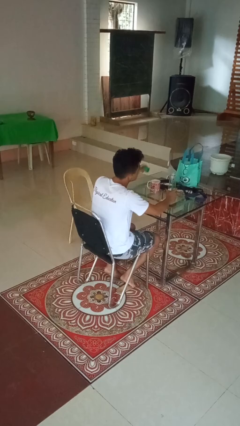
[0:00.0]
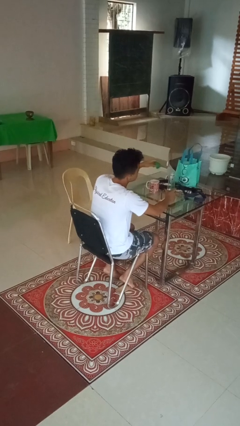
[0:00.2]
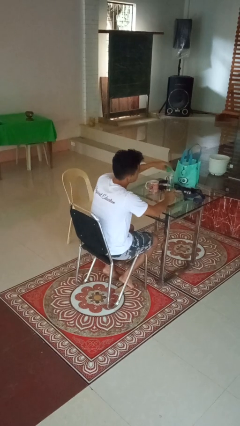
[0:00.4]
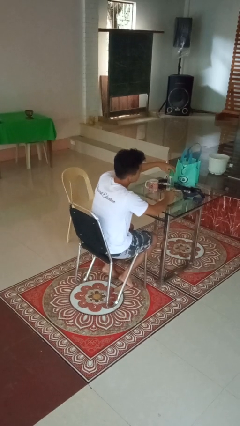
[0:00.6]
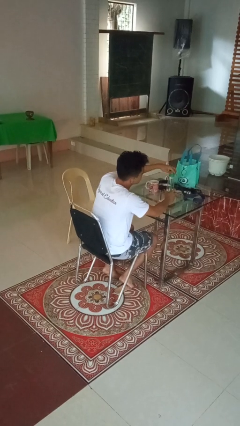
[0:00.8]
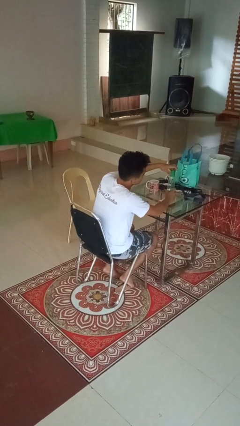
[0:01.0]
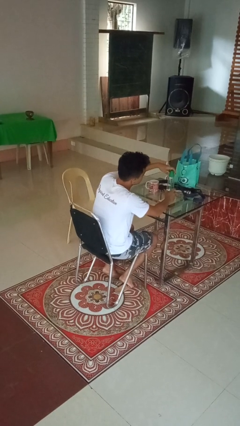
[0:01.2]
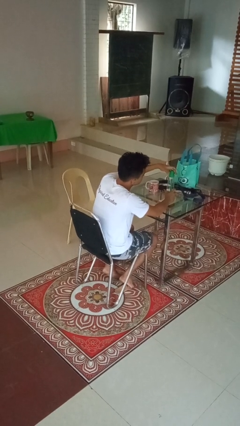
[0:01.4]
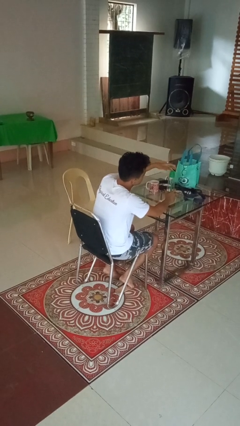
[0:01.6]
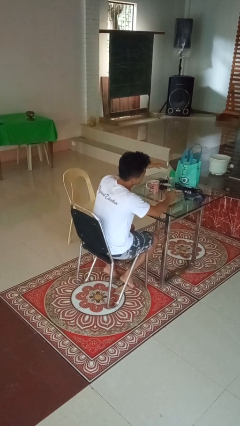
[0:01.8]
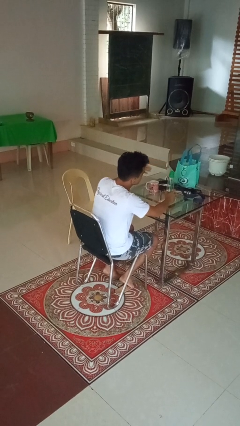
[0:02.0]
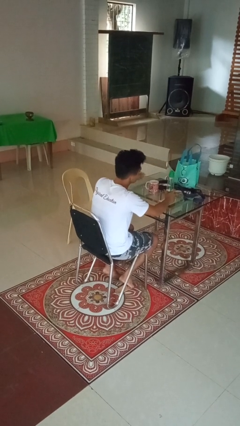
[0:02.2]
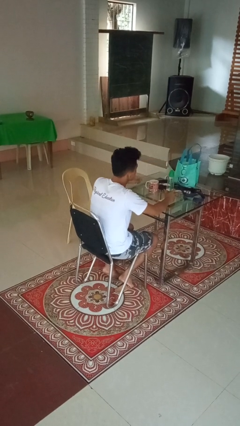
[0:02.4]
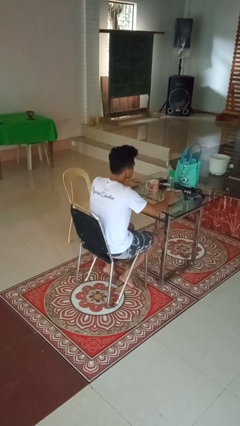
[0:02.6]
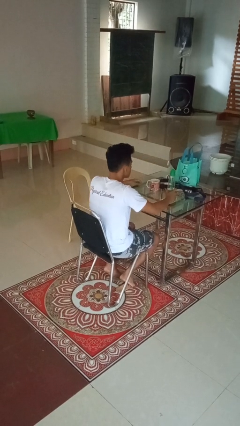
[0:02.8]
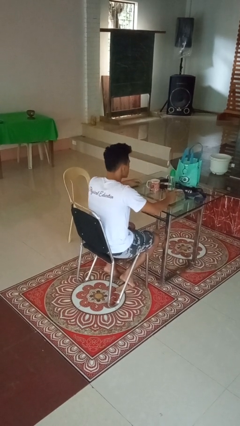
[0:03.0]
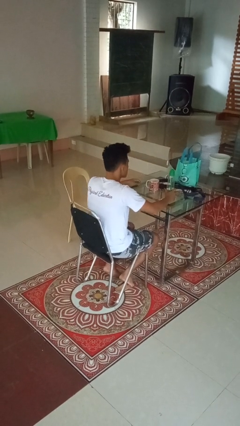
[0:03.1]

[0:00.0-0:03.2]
person screws lid to bottle

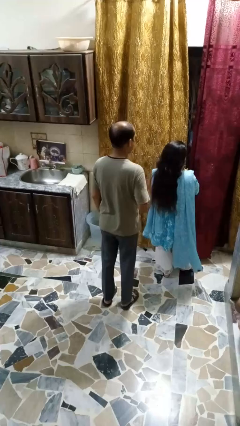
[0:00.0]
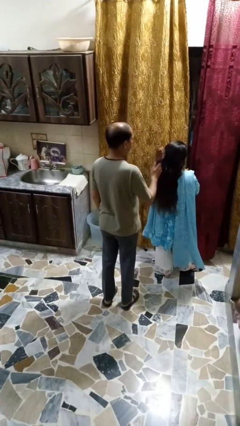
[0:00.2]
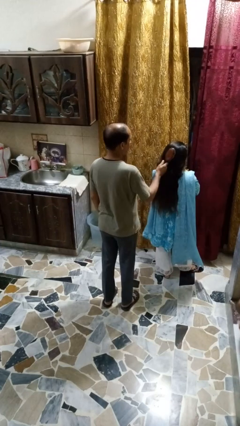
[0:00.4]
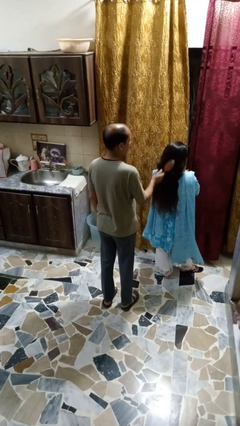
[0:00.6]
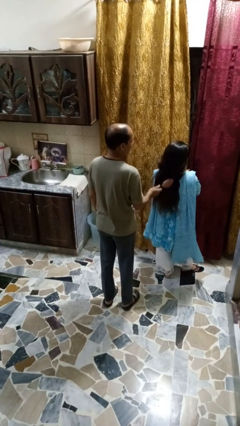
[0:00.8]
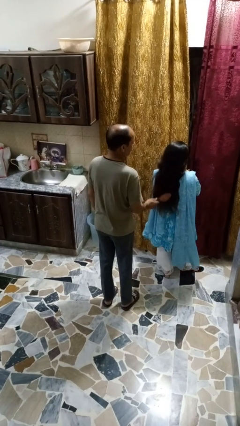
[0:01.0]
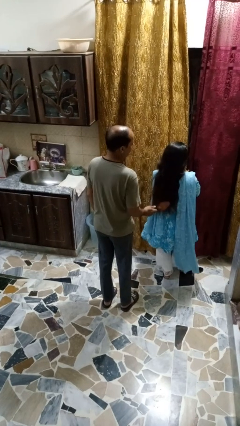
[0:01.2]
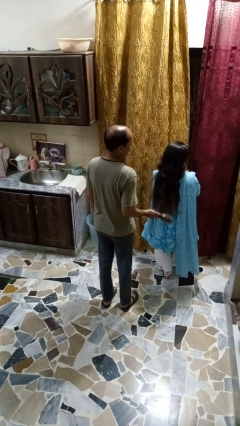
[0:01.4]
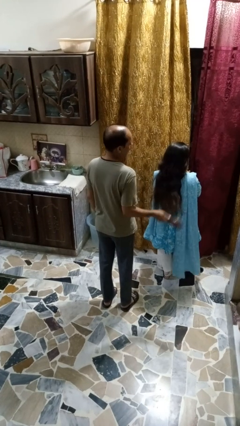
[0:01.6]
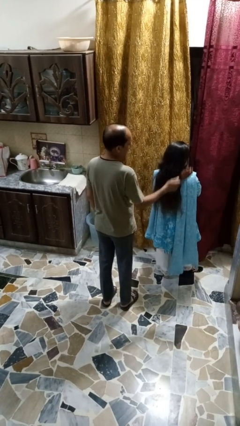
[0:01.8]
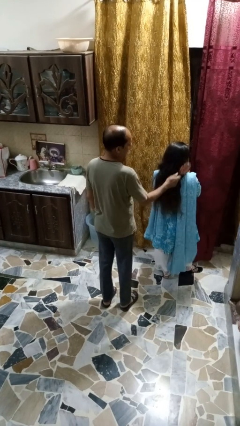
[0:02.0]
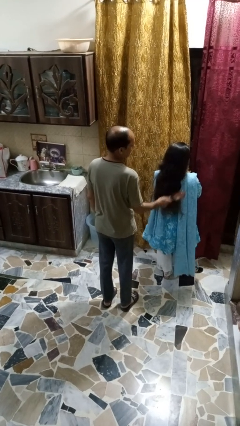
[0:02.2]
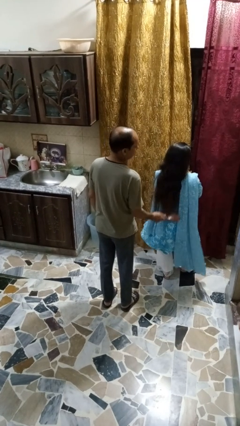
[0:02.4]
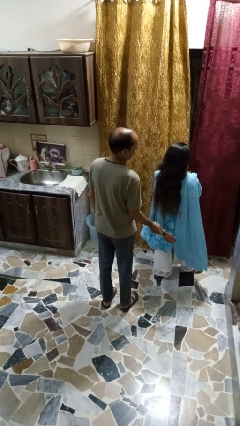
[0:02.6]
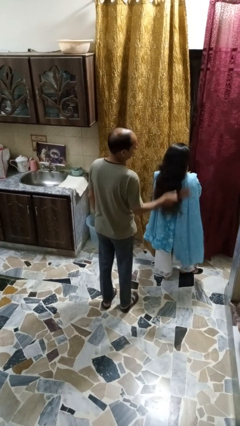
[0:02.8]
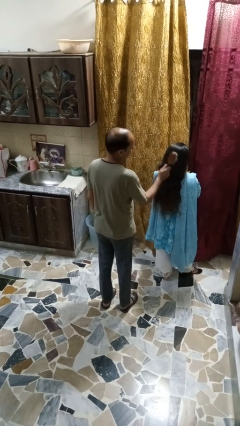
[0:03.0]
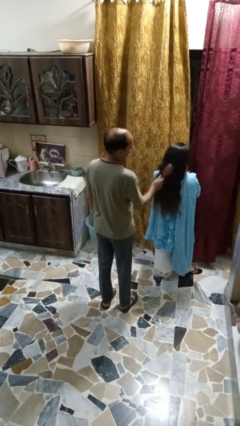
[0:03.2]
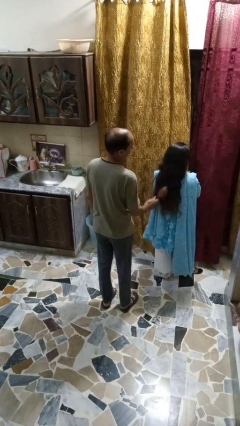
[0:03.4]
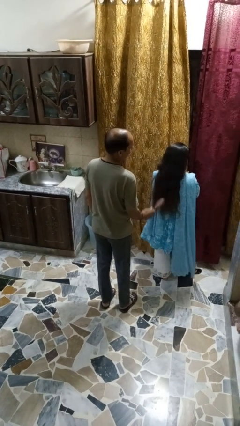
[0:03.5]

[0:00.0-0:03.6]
person brushes hair of person

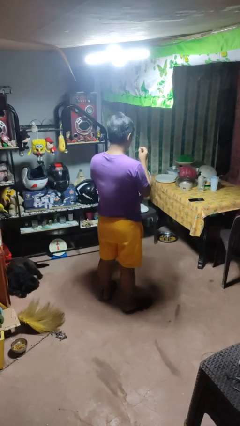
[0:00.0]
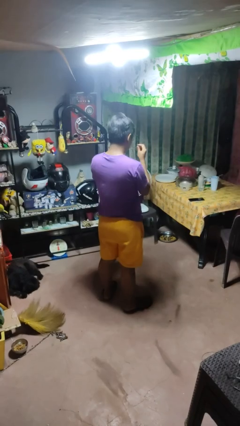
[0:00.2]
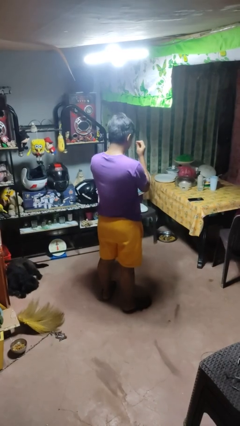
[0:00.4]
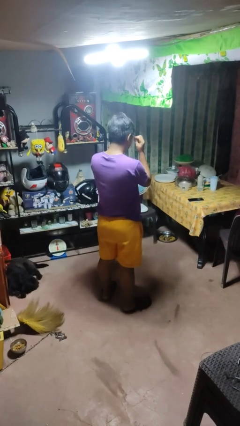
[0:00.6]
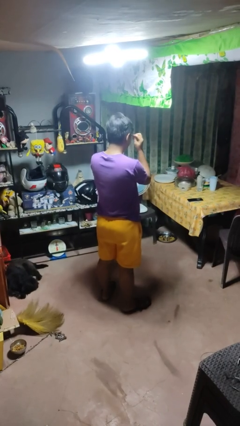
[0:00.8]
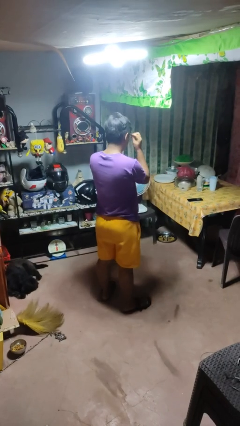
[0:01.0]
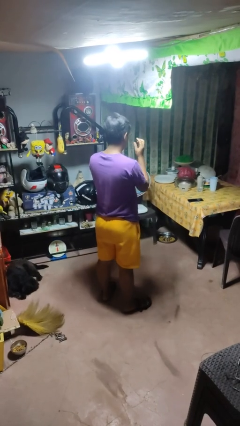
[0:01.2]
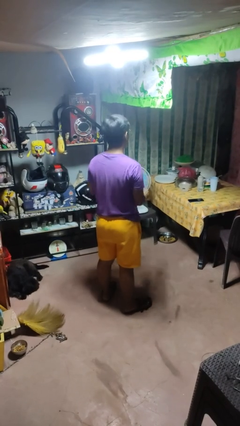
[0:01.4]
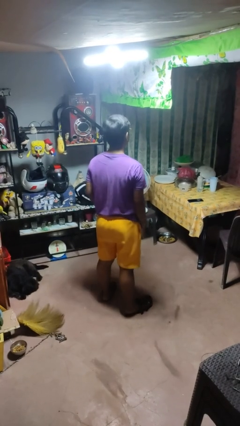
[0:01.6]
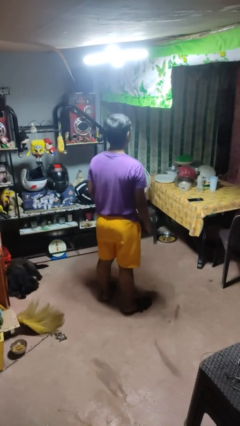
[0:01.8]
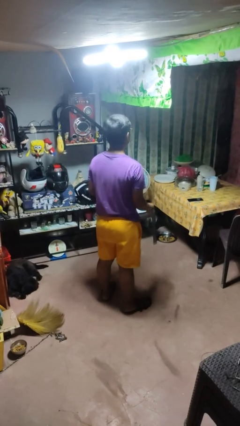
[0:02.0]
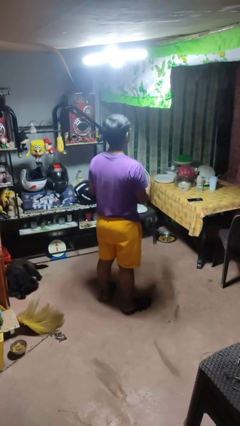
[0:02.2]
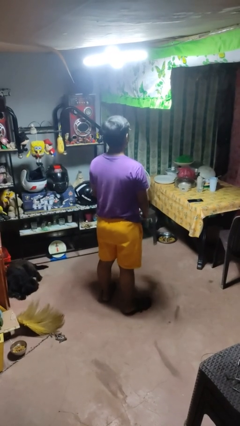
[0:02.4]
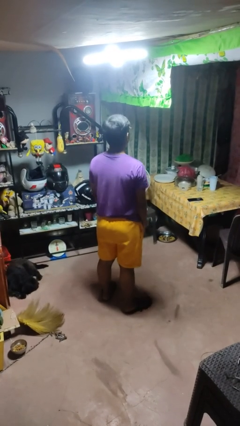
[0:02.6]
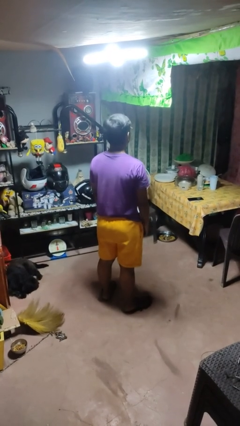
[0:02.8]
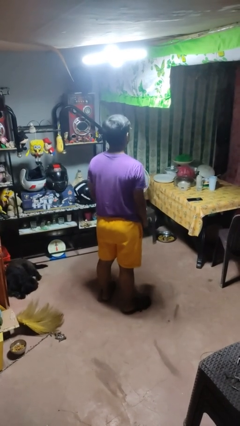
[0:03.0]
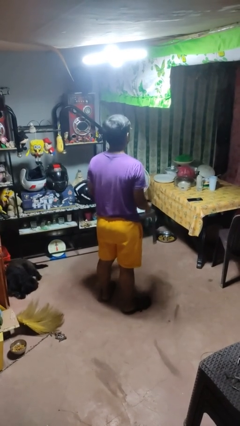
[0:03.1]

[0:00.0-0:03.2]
person puts on glasses

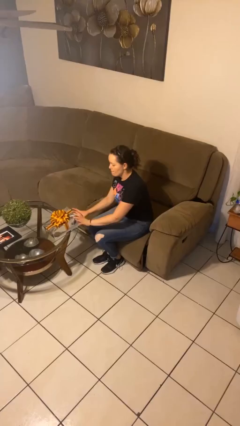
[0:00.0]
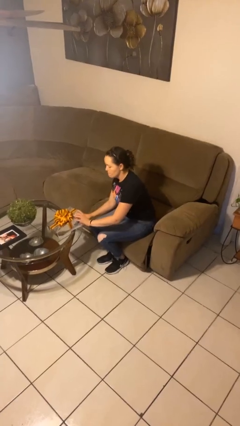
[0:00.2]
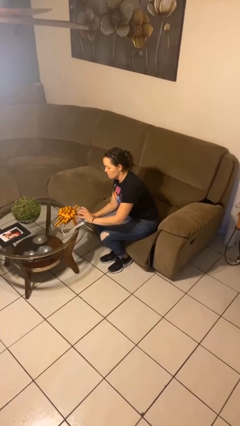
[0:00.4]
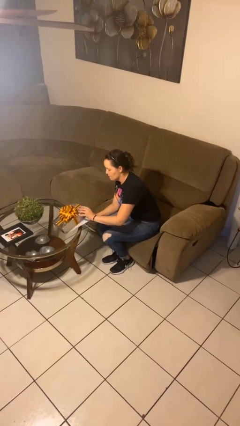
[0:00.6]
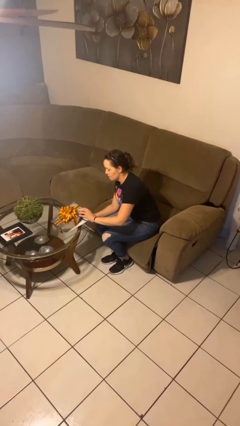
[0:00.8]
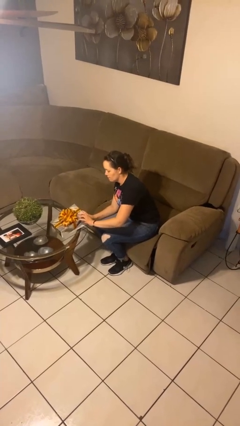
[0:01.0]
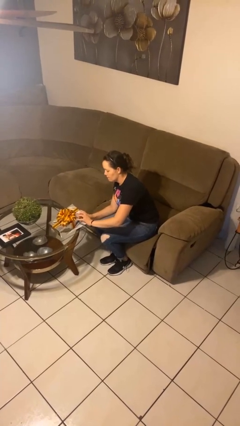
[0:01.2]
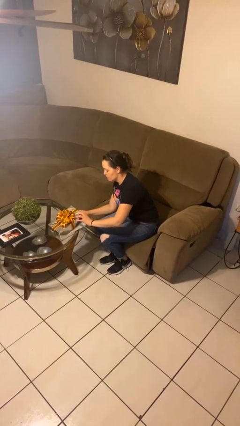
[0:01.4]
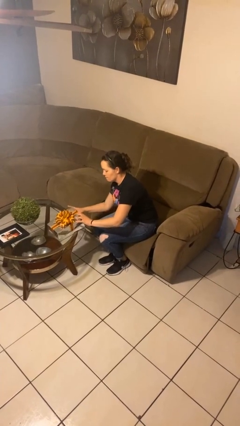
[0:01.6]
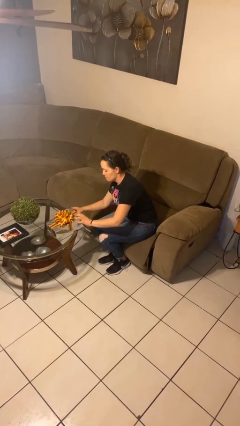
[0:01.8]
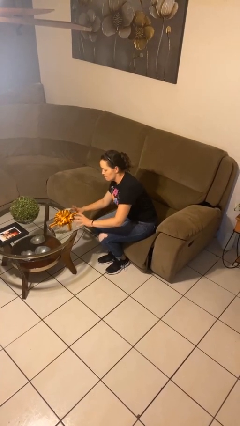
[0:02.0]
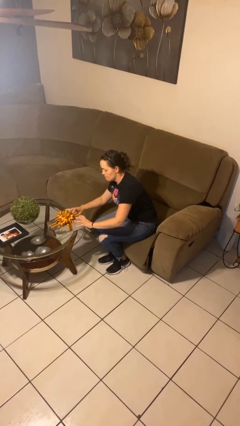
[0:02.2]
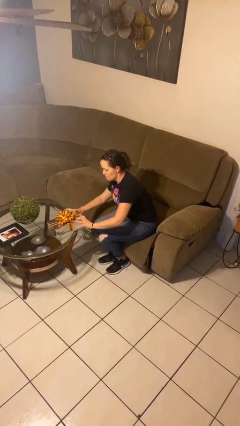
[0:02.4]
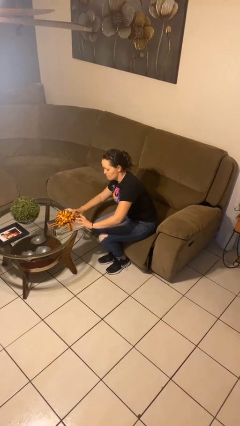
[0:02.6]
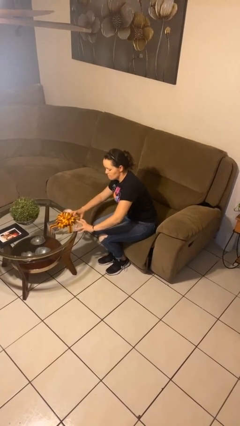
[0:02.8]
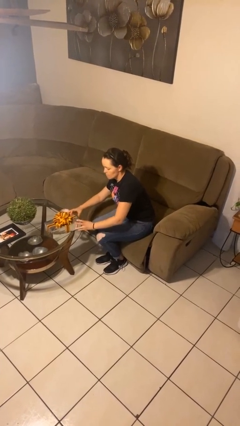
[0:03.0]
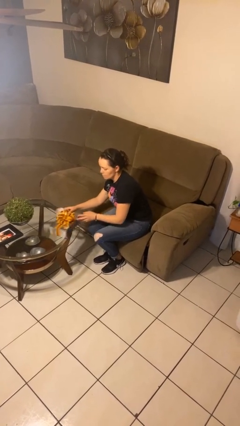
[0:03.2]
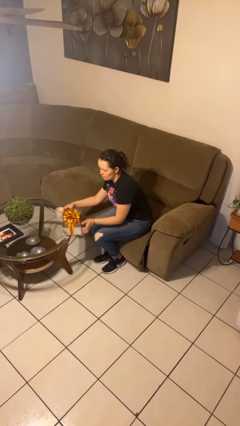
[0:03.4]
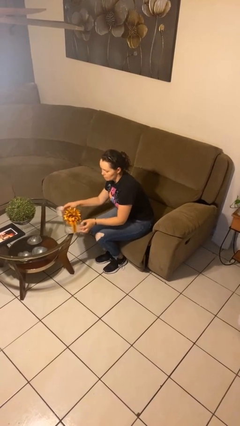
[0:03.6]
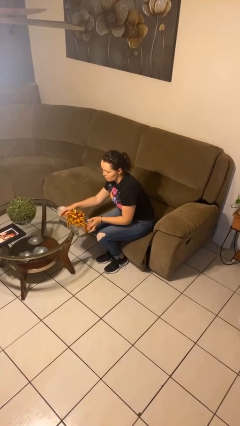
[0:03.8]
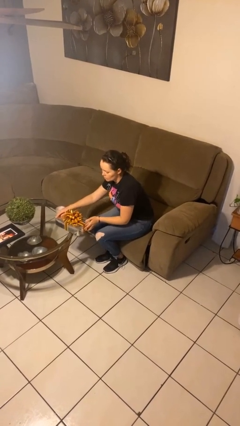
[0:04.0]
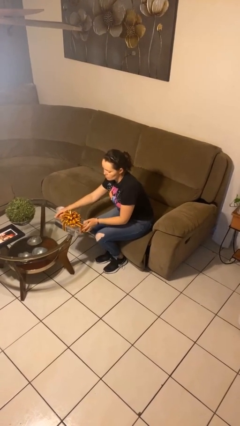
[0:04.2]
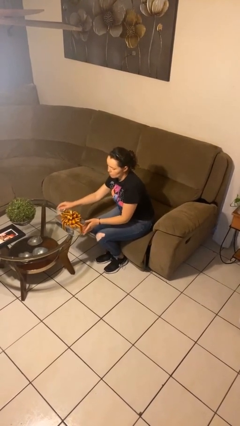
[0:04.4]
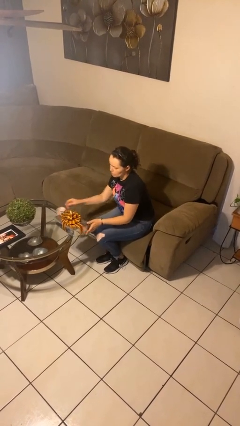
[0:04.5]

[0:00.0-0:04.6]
person wraps box

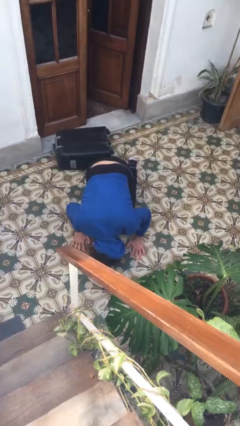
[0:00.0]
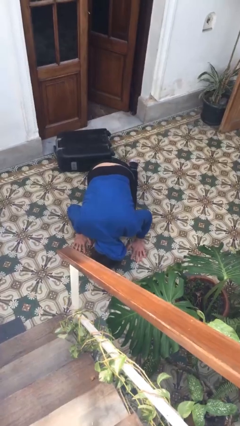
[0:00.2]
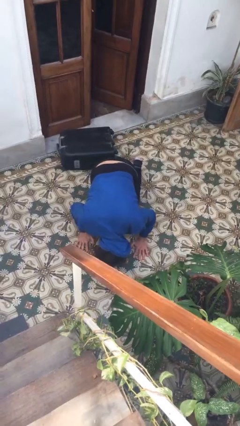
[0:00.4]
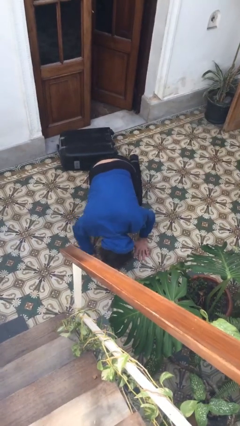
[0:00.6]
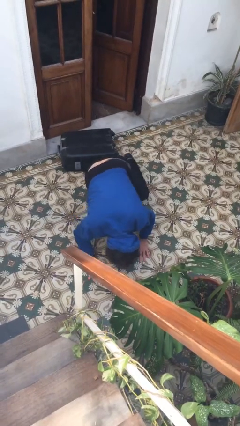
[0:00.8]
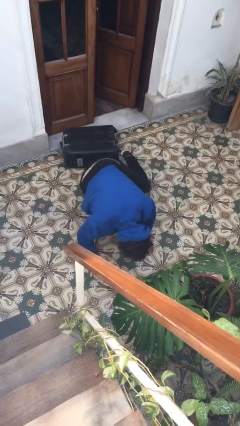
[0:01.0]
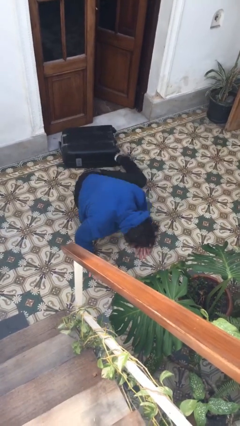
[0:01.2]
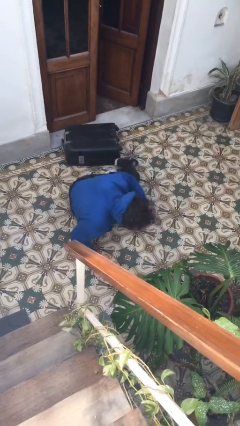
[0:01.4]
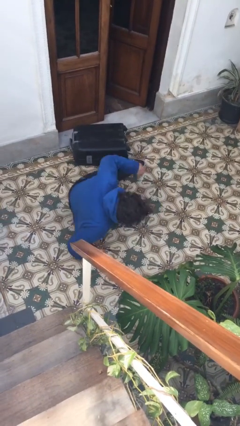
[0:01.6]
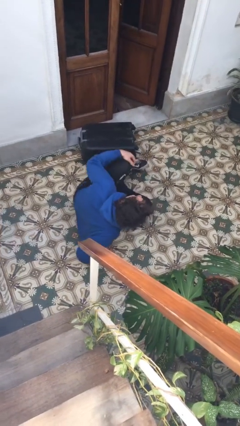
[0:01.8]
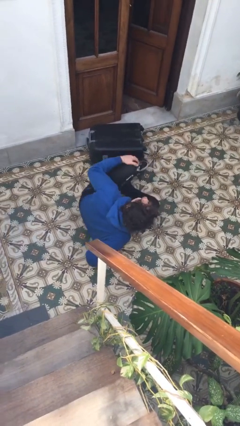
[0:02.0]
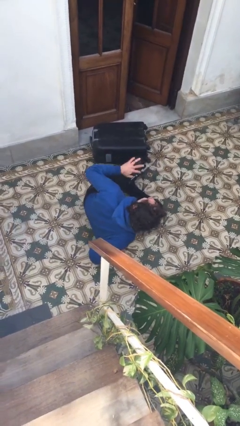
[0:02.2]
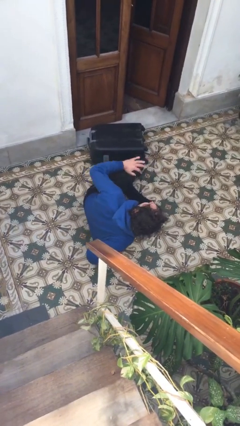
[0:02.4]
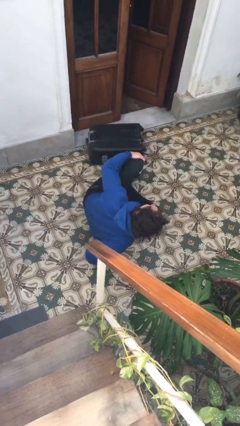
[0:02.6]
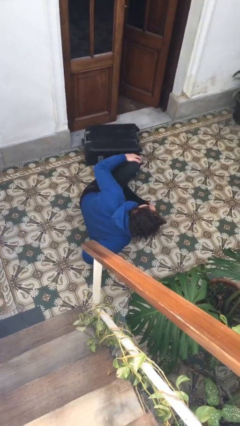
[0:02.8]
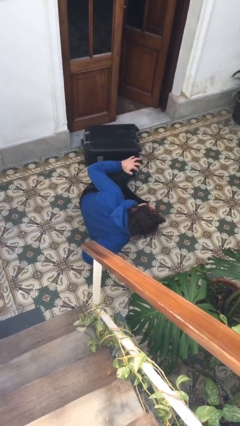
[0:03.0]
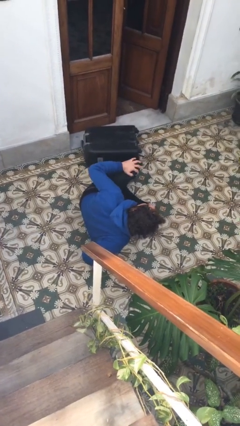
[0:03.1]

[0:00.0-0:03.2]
person lies down on floor
